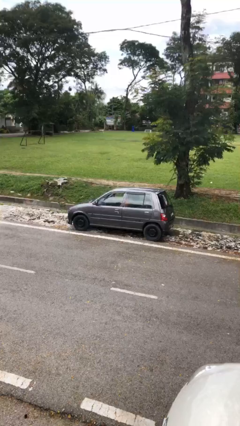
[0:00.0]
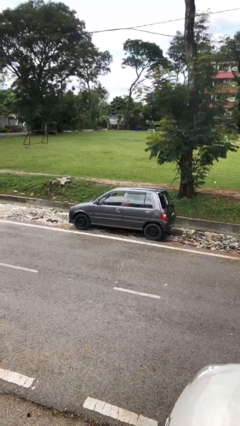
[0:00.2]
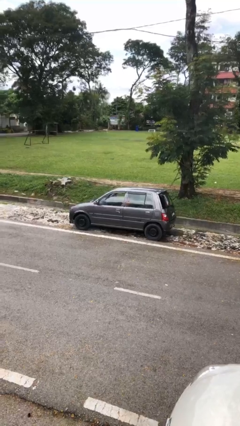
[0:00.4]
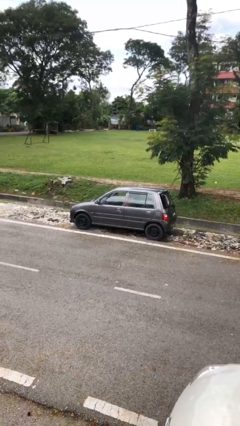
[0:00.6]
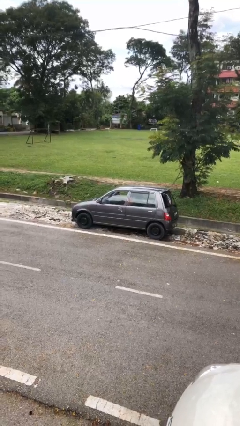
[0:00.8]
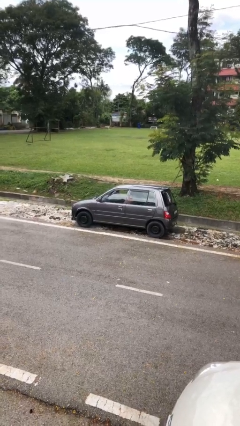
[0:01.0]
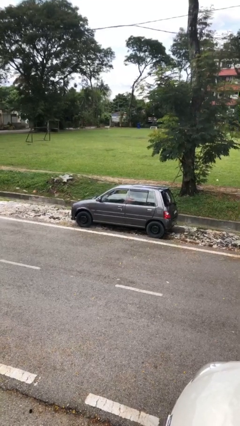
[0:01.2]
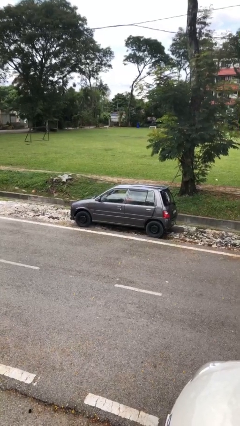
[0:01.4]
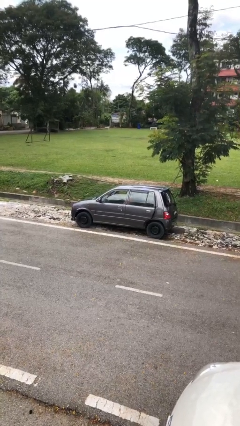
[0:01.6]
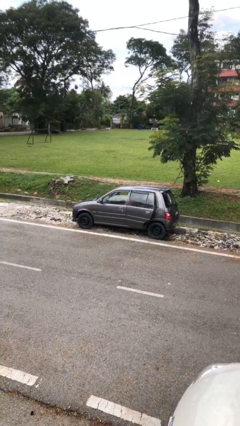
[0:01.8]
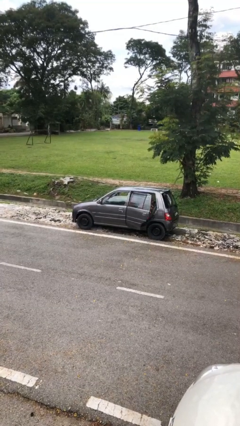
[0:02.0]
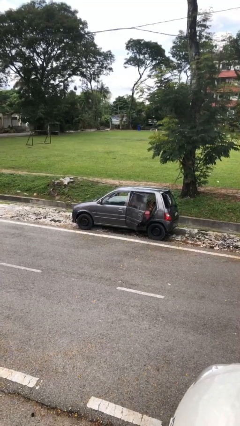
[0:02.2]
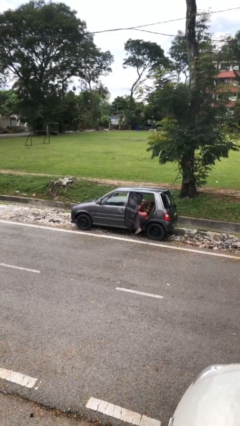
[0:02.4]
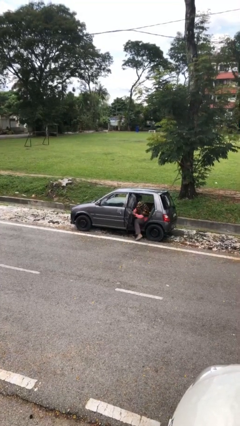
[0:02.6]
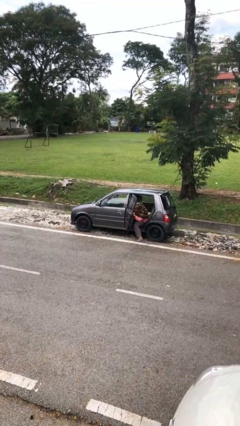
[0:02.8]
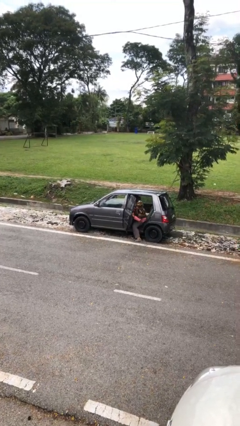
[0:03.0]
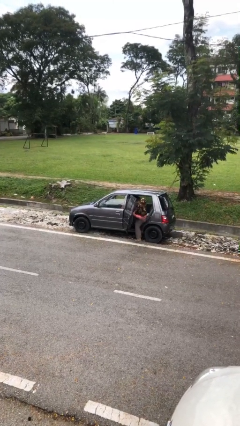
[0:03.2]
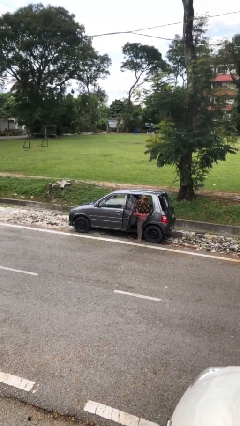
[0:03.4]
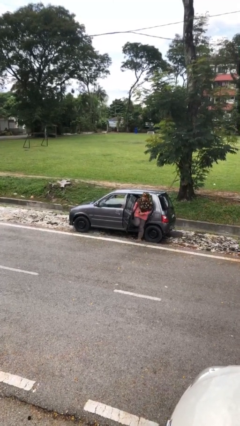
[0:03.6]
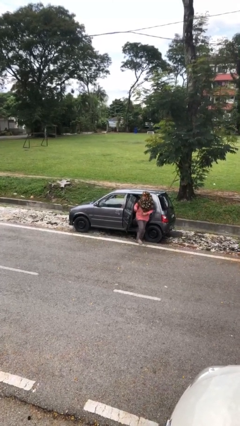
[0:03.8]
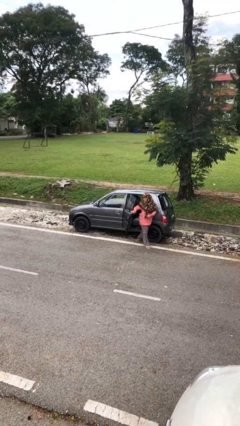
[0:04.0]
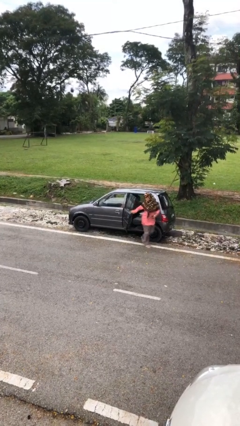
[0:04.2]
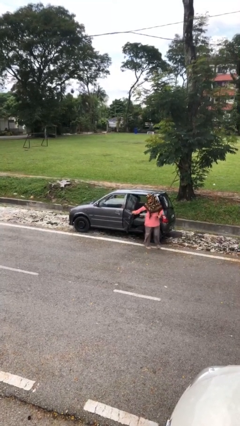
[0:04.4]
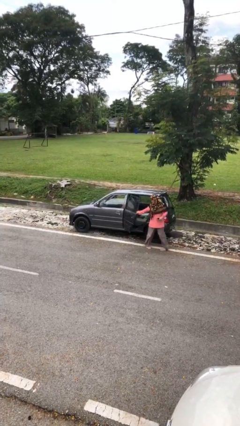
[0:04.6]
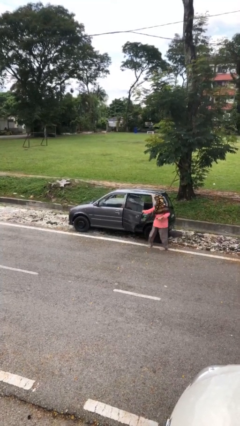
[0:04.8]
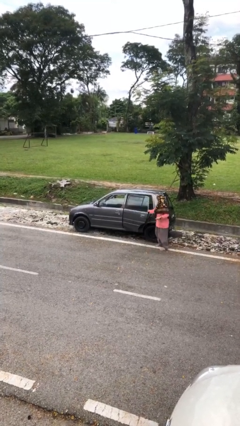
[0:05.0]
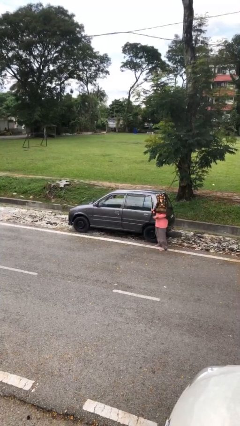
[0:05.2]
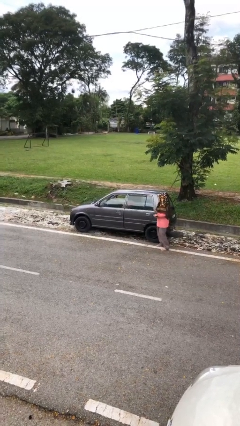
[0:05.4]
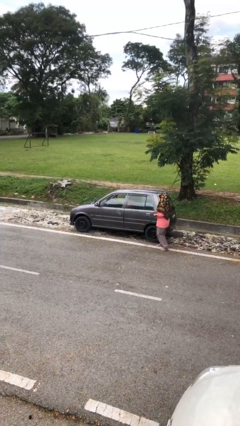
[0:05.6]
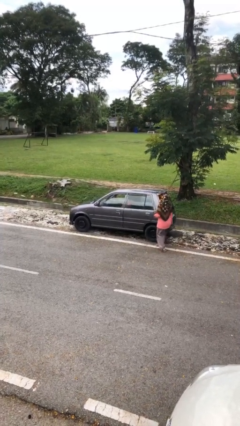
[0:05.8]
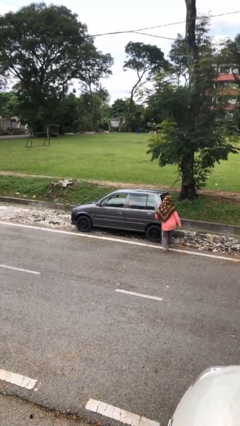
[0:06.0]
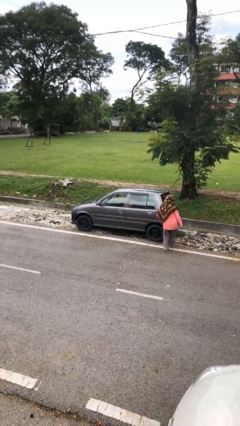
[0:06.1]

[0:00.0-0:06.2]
car drops off person

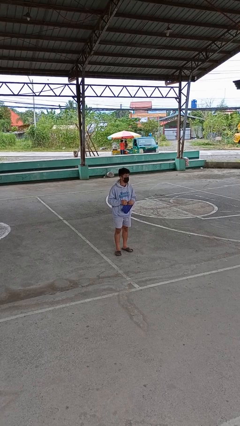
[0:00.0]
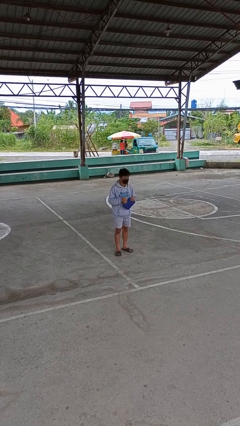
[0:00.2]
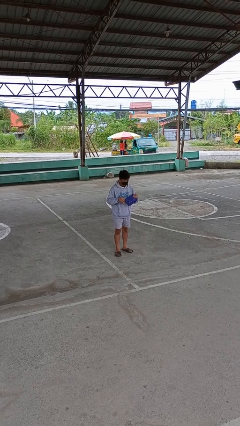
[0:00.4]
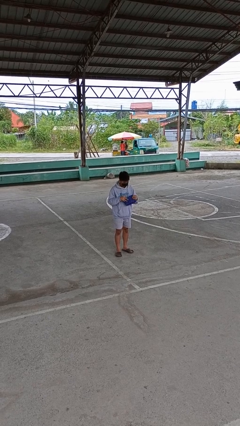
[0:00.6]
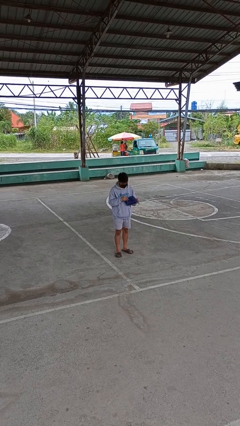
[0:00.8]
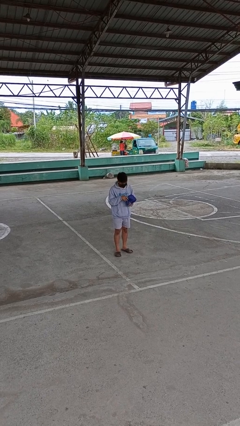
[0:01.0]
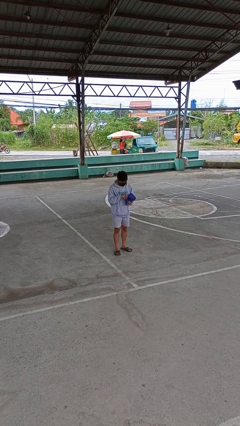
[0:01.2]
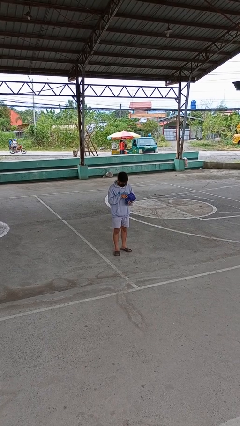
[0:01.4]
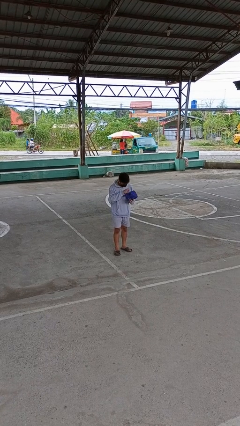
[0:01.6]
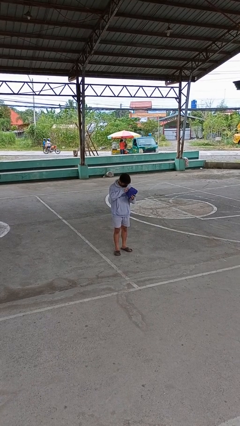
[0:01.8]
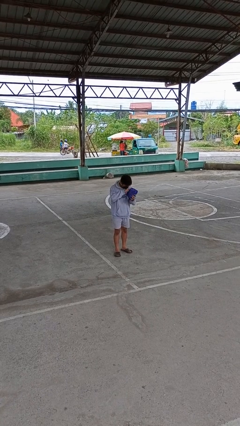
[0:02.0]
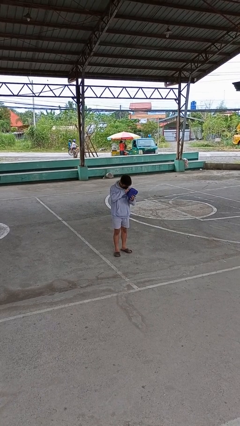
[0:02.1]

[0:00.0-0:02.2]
person searches in purse

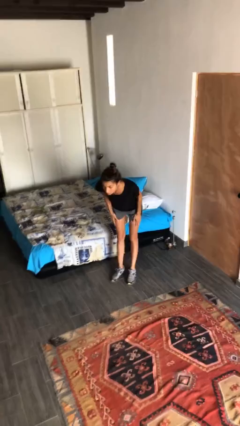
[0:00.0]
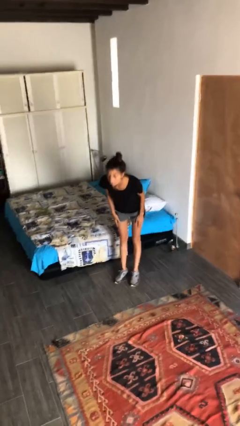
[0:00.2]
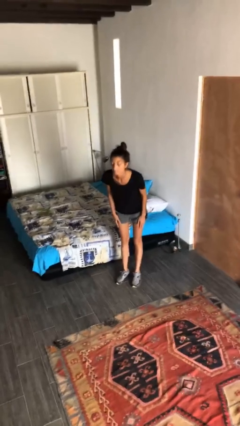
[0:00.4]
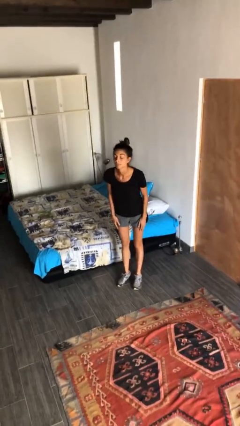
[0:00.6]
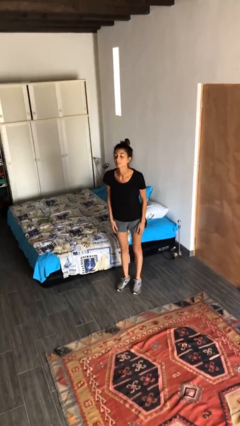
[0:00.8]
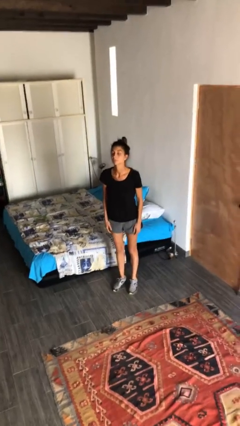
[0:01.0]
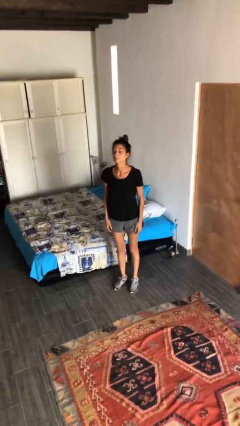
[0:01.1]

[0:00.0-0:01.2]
person bows

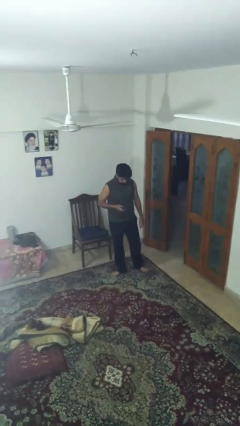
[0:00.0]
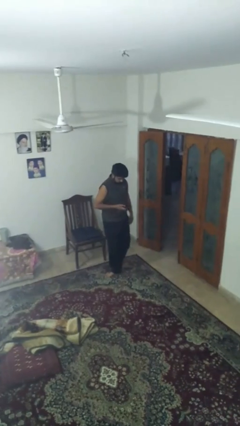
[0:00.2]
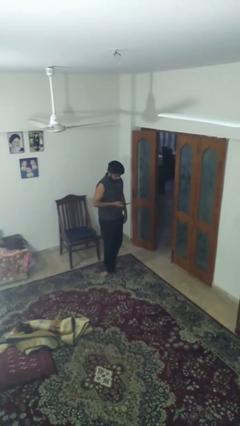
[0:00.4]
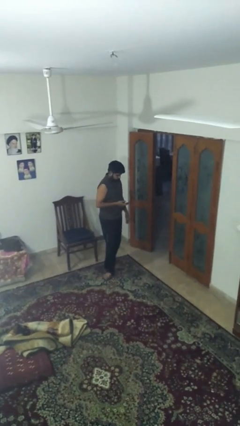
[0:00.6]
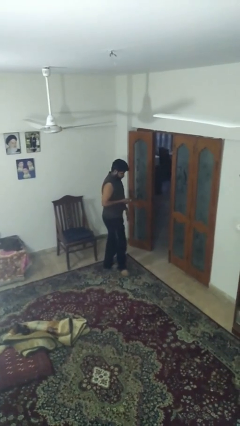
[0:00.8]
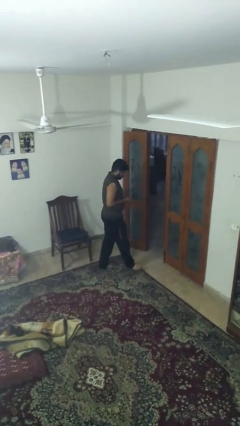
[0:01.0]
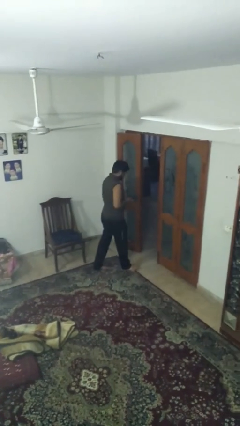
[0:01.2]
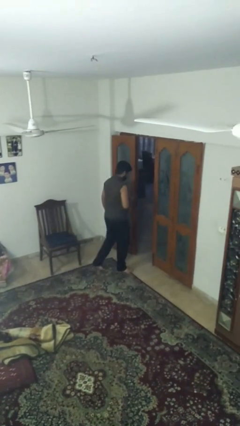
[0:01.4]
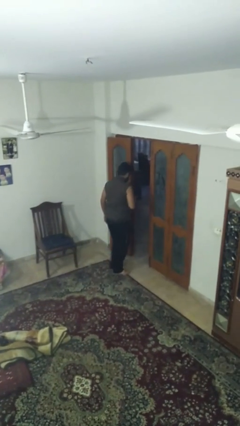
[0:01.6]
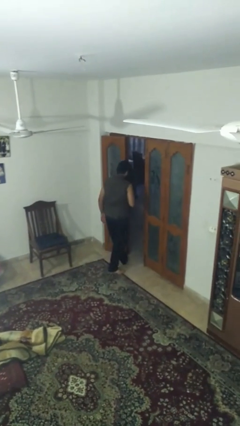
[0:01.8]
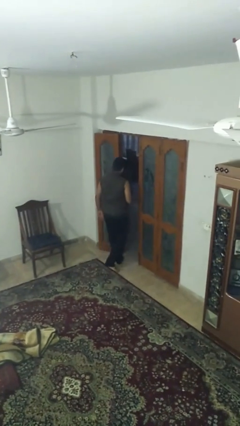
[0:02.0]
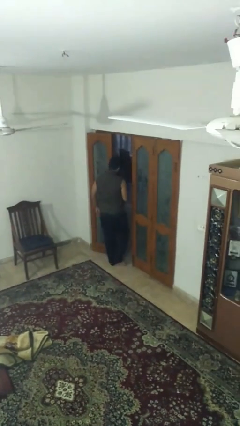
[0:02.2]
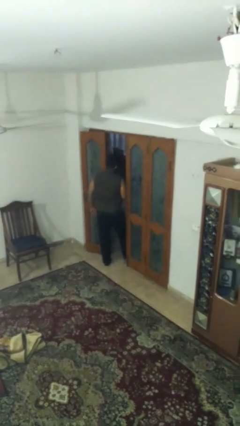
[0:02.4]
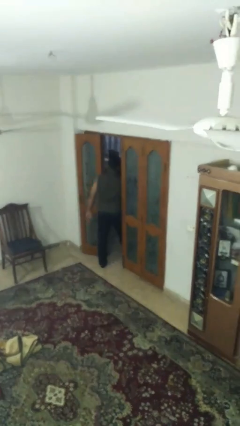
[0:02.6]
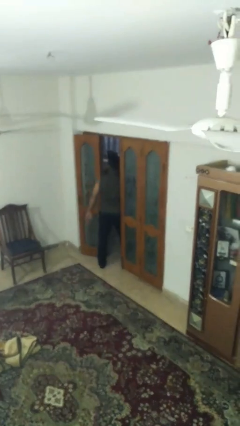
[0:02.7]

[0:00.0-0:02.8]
person exits scene through structure

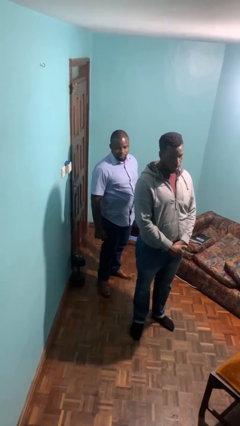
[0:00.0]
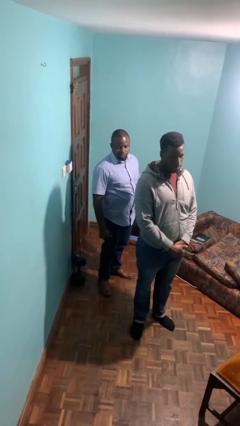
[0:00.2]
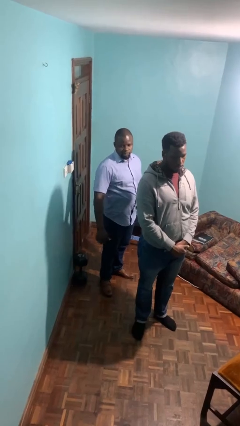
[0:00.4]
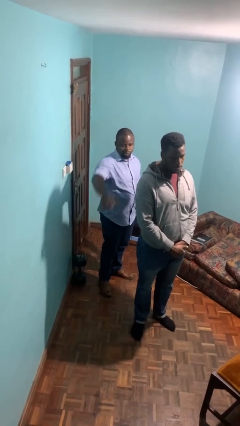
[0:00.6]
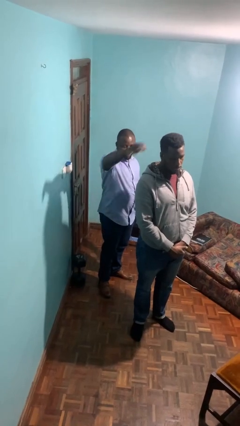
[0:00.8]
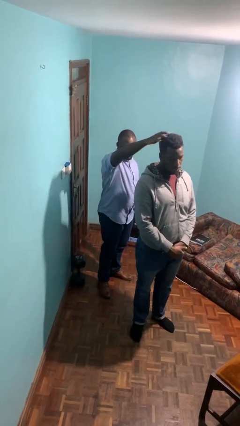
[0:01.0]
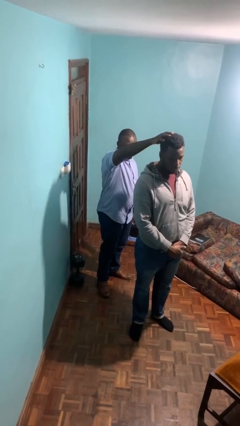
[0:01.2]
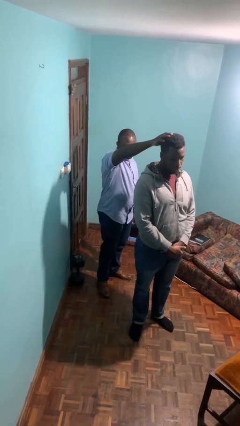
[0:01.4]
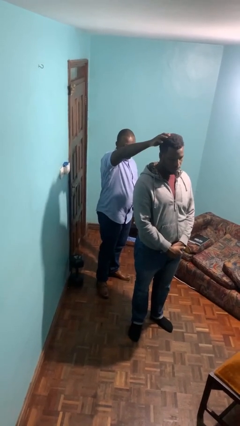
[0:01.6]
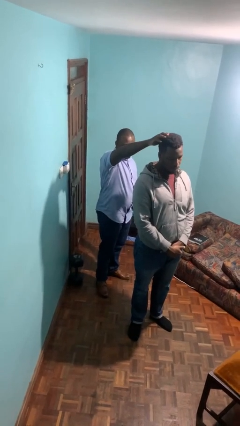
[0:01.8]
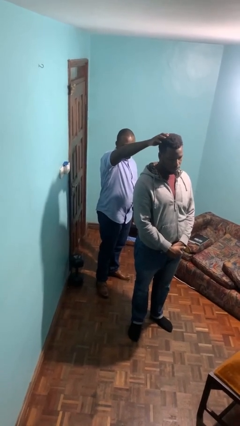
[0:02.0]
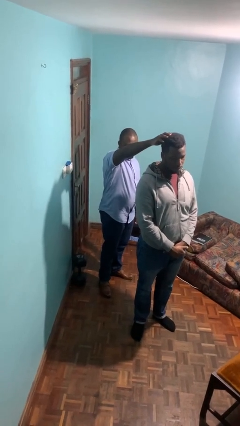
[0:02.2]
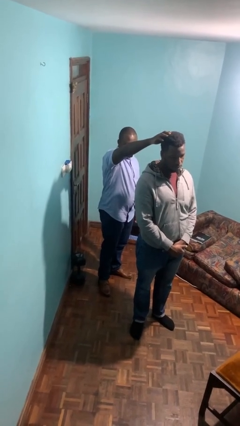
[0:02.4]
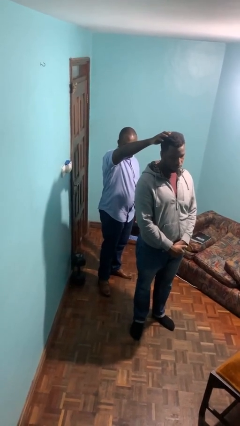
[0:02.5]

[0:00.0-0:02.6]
person grabs person by hair

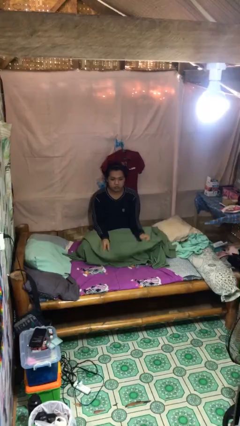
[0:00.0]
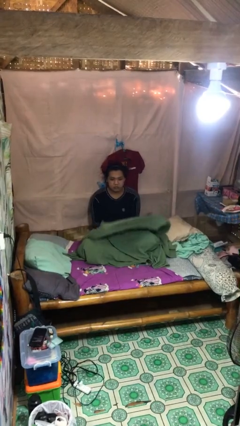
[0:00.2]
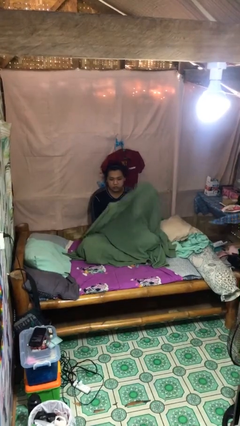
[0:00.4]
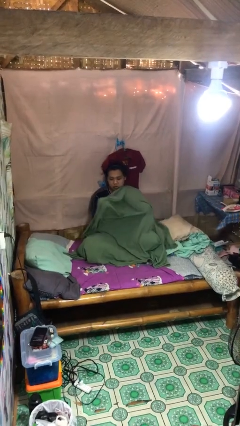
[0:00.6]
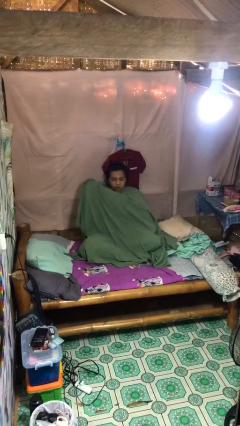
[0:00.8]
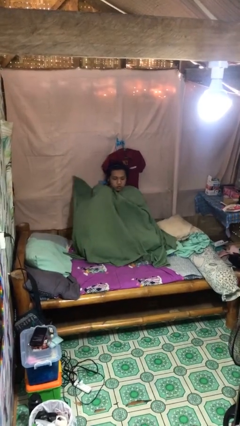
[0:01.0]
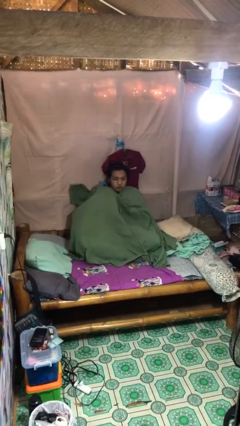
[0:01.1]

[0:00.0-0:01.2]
person covers with blanket

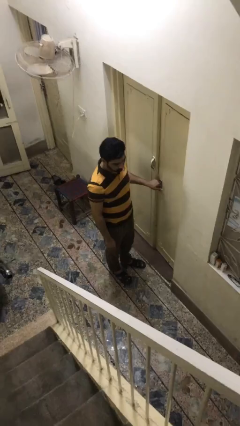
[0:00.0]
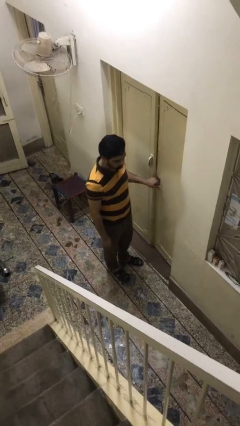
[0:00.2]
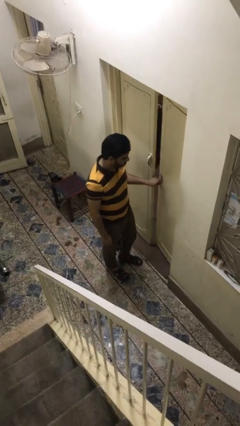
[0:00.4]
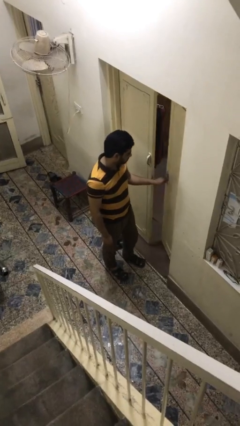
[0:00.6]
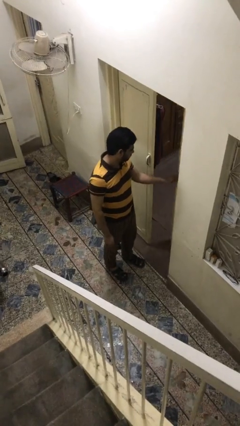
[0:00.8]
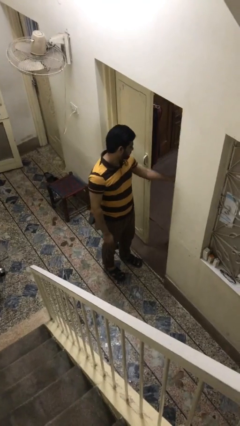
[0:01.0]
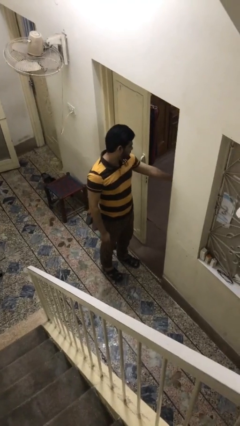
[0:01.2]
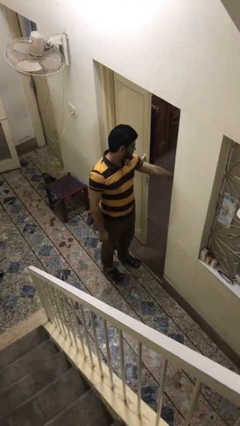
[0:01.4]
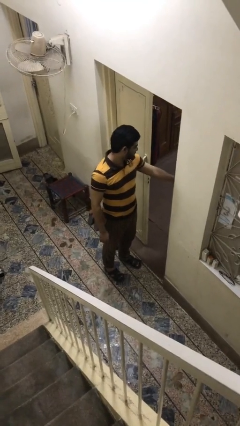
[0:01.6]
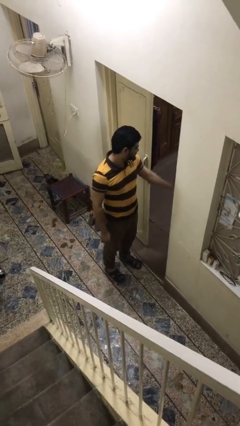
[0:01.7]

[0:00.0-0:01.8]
person opens facility door
